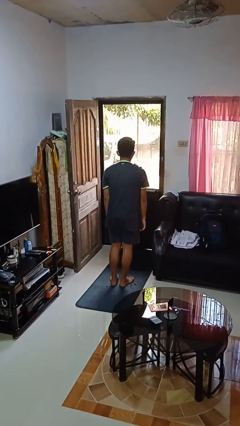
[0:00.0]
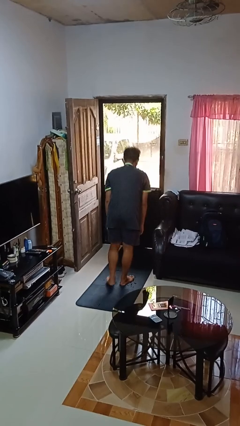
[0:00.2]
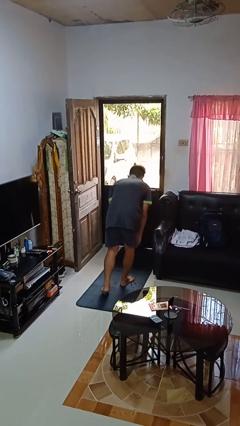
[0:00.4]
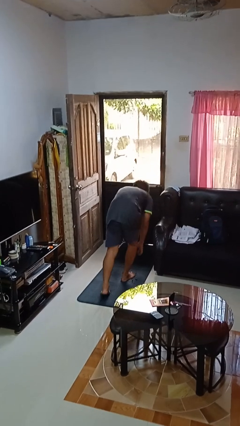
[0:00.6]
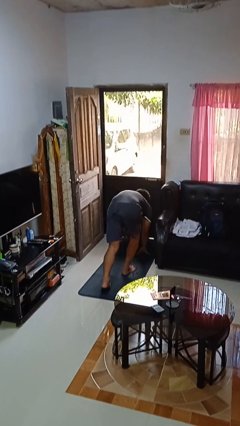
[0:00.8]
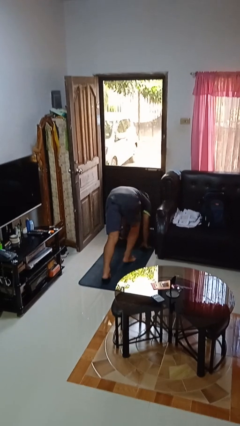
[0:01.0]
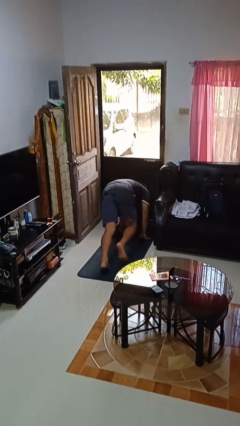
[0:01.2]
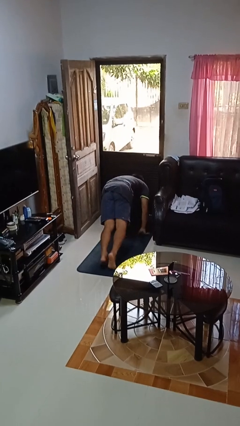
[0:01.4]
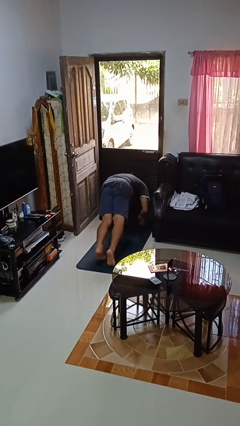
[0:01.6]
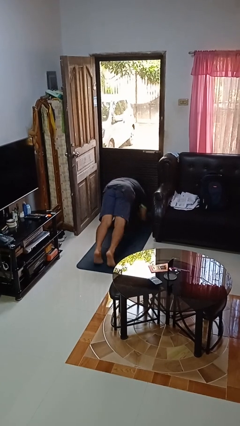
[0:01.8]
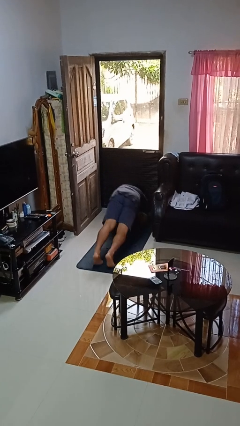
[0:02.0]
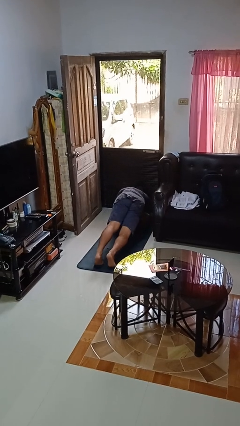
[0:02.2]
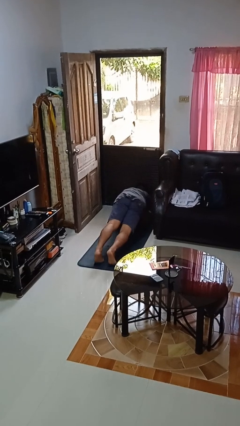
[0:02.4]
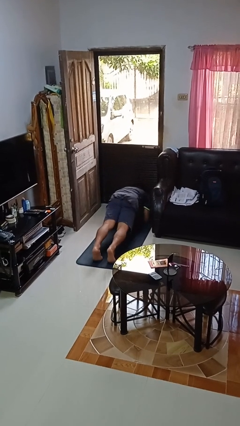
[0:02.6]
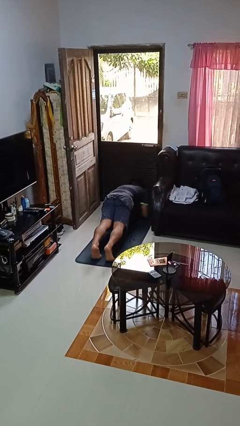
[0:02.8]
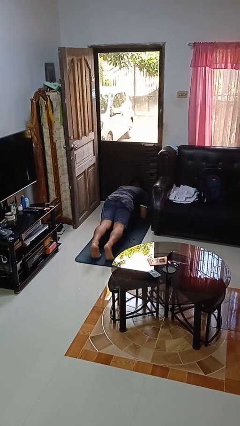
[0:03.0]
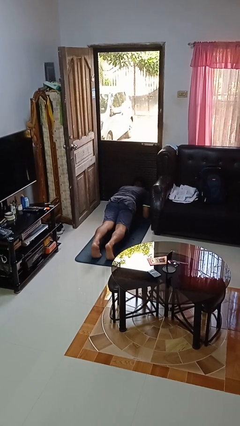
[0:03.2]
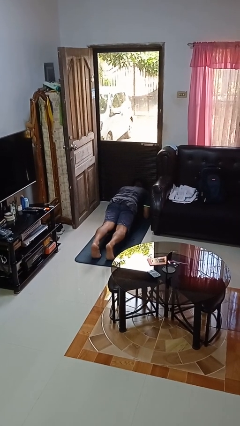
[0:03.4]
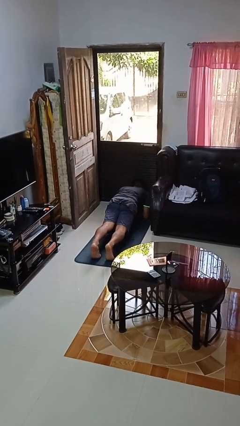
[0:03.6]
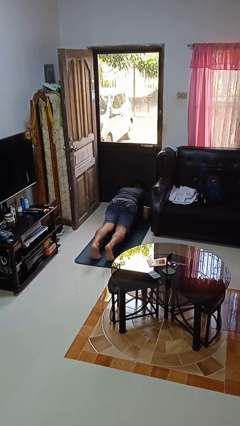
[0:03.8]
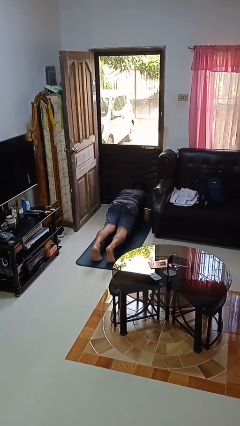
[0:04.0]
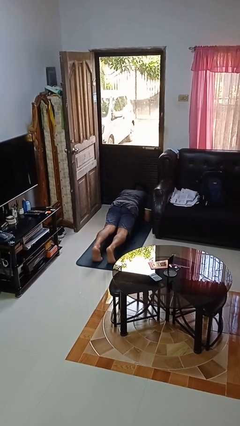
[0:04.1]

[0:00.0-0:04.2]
person exercises with plank

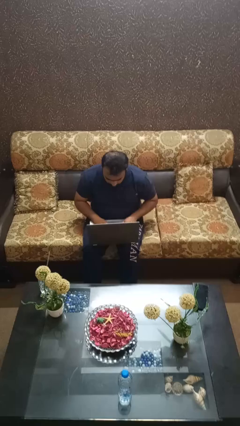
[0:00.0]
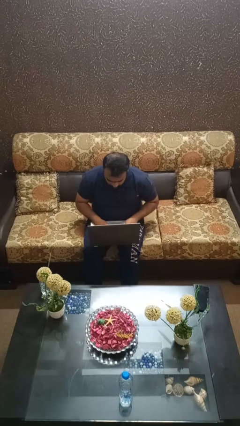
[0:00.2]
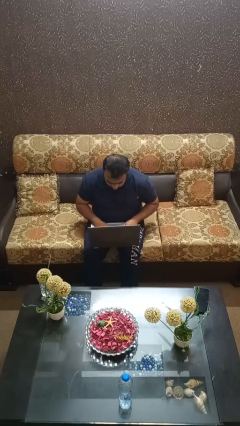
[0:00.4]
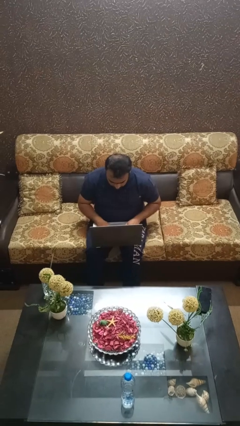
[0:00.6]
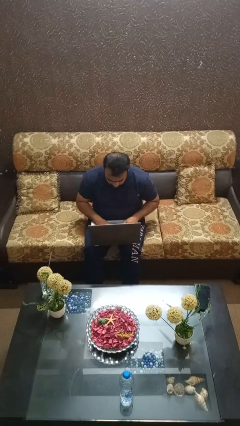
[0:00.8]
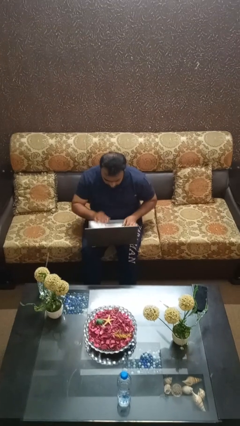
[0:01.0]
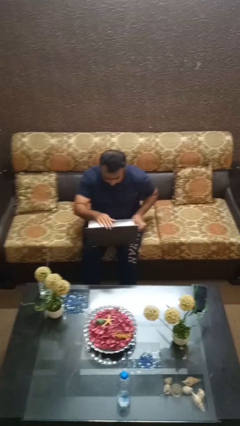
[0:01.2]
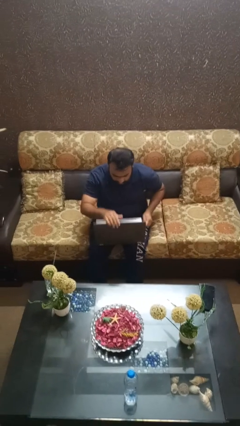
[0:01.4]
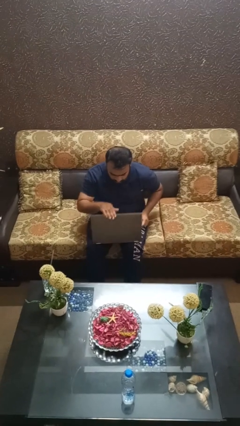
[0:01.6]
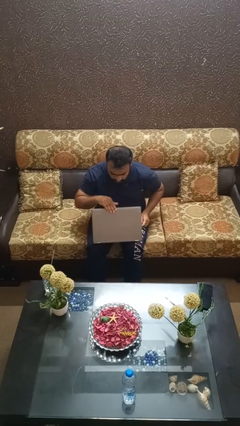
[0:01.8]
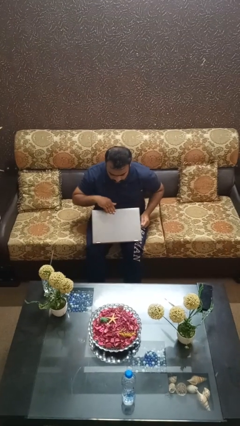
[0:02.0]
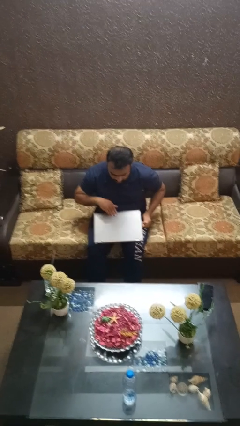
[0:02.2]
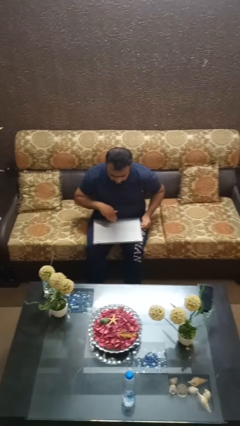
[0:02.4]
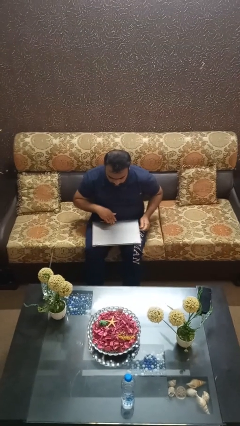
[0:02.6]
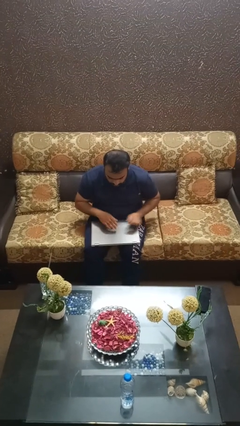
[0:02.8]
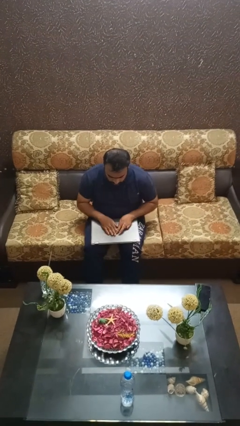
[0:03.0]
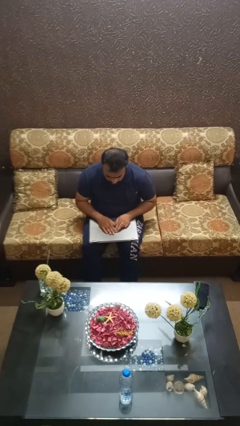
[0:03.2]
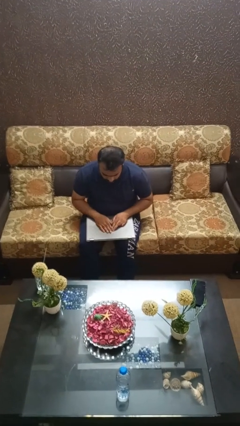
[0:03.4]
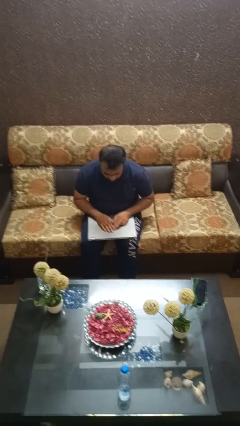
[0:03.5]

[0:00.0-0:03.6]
person closes laptop

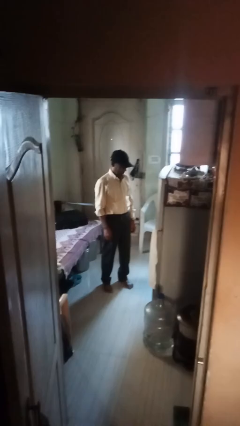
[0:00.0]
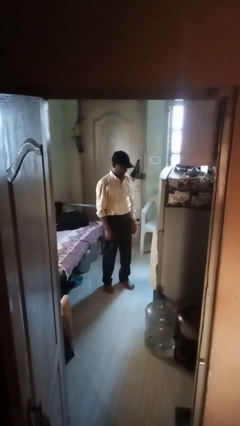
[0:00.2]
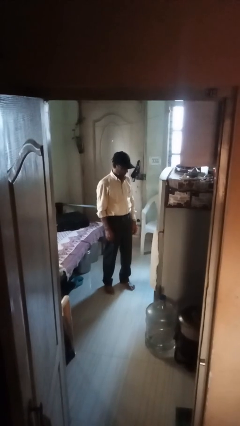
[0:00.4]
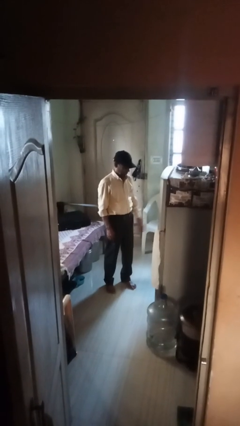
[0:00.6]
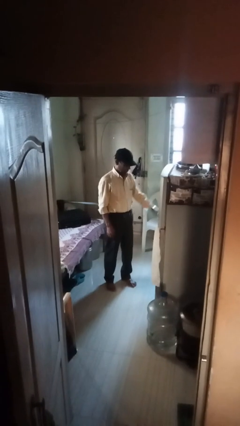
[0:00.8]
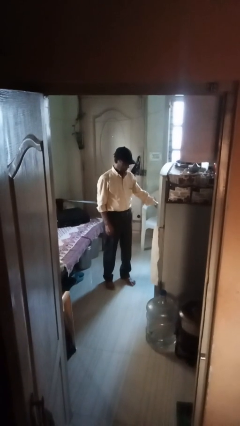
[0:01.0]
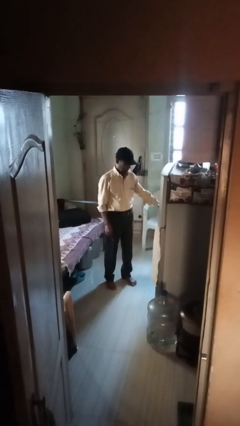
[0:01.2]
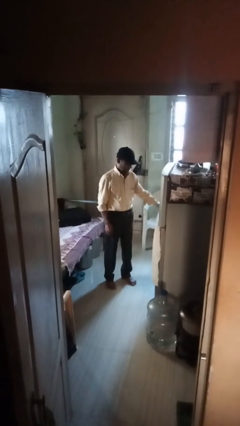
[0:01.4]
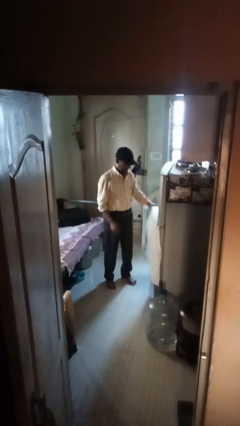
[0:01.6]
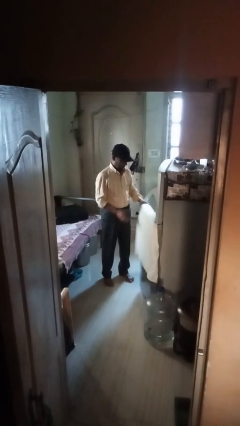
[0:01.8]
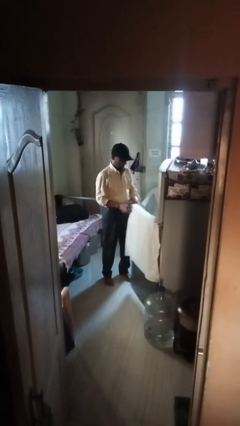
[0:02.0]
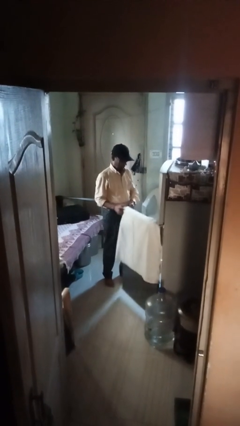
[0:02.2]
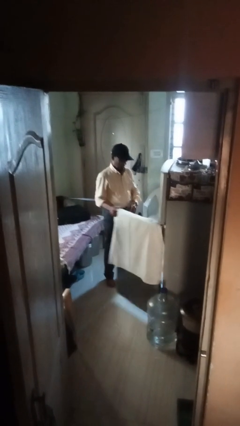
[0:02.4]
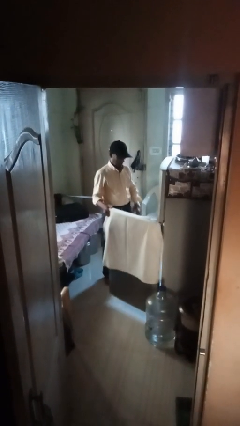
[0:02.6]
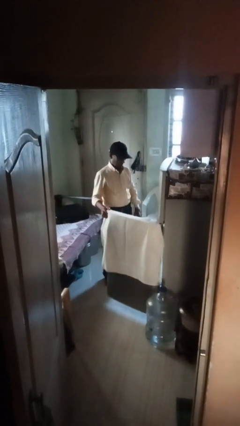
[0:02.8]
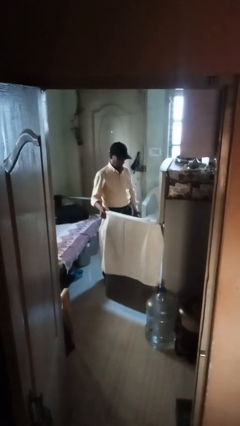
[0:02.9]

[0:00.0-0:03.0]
person opens clothes washer

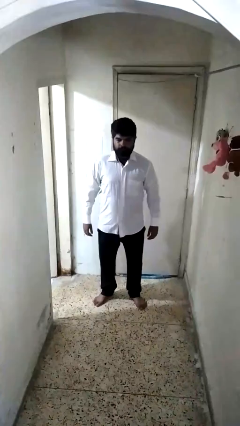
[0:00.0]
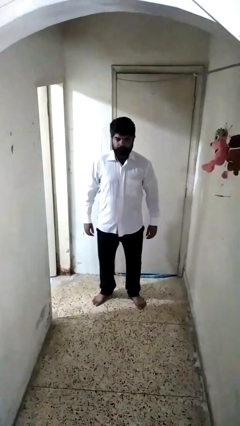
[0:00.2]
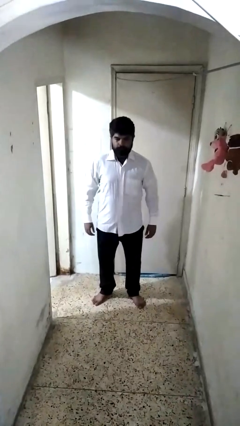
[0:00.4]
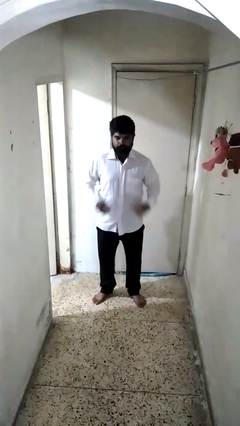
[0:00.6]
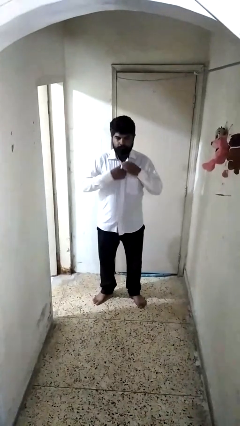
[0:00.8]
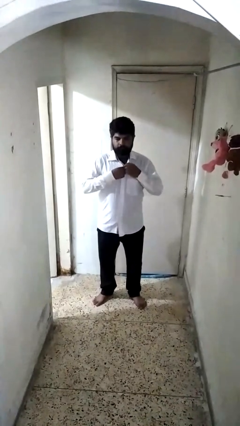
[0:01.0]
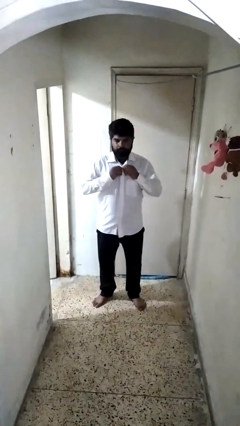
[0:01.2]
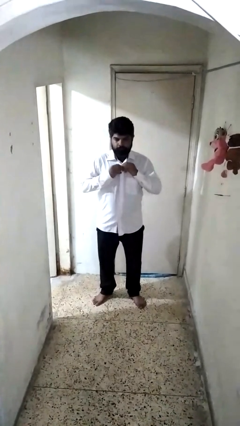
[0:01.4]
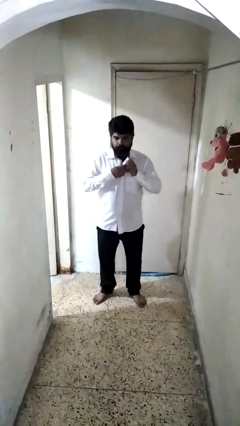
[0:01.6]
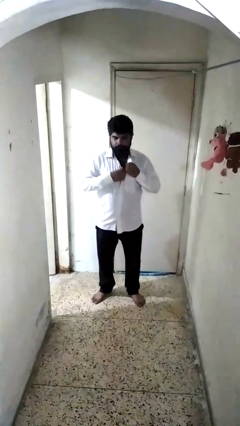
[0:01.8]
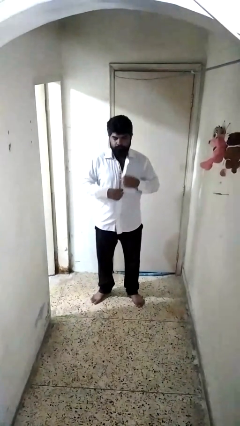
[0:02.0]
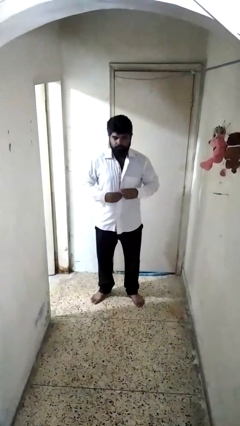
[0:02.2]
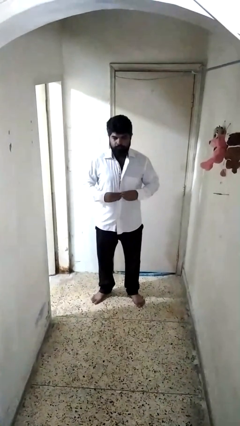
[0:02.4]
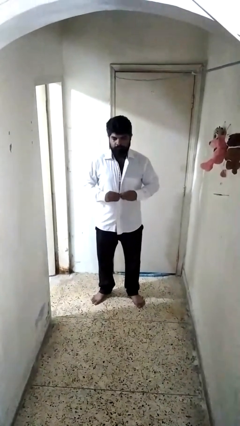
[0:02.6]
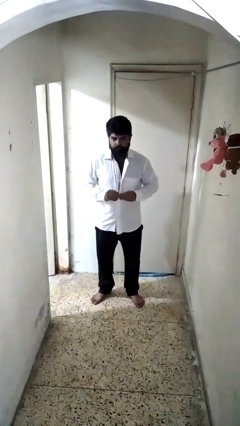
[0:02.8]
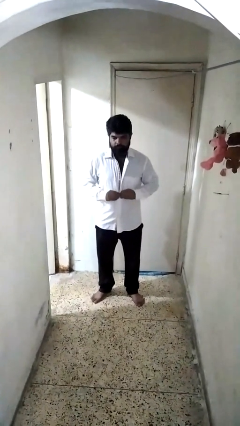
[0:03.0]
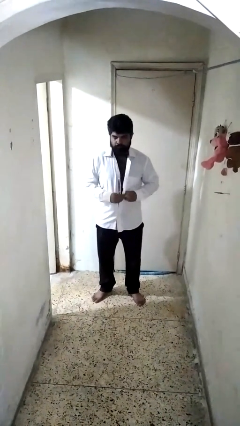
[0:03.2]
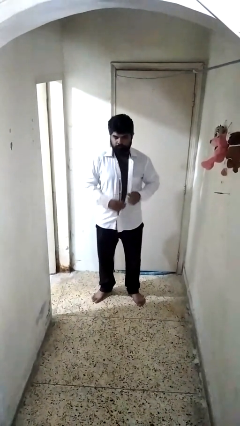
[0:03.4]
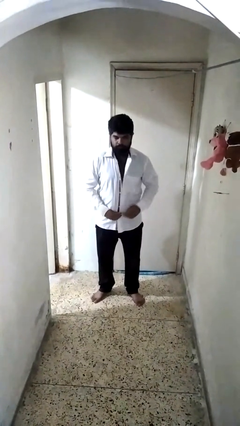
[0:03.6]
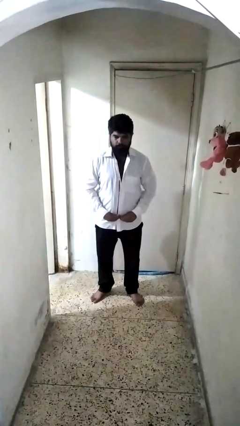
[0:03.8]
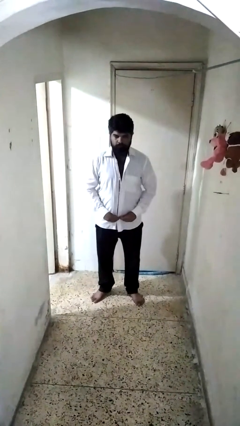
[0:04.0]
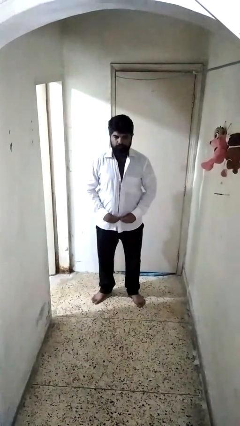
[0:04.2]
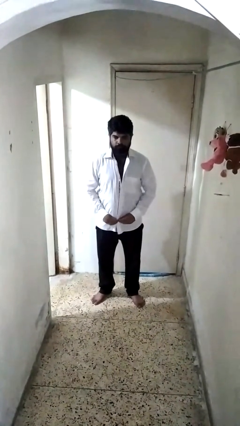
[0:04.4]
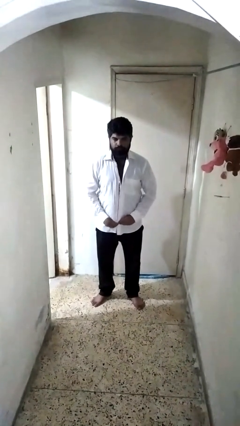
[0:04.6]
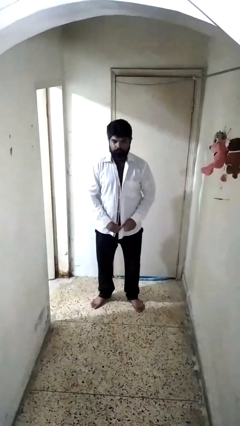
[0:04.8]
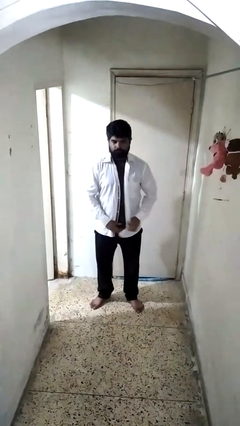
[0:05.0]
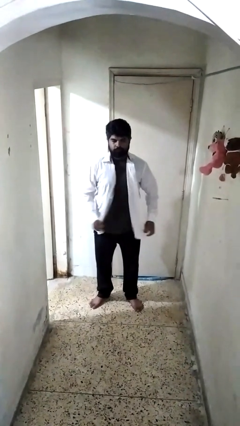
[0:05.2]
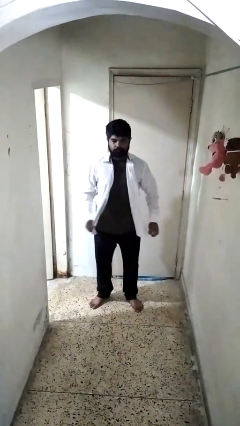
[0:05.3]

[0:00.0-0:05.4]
person unbuttons shirt

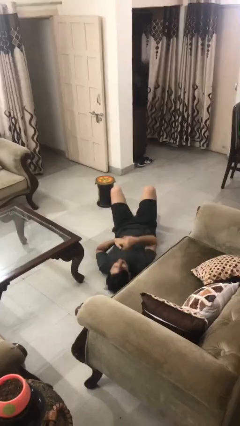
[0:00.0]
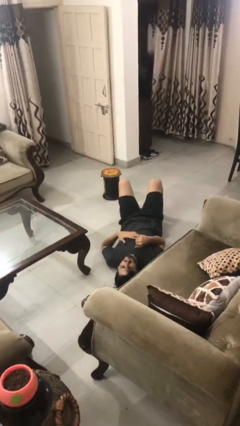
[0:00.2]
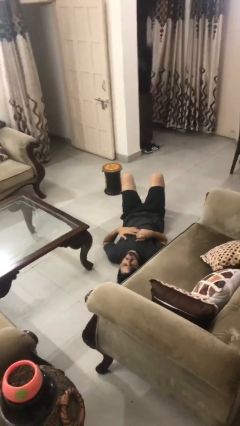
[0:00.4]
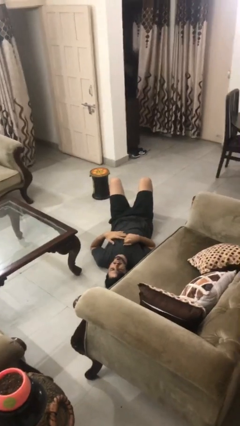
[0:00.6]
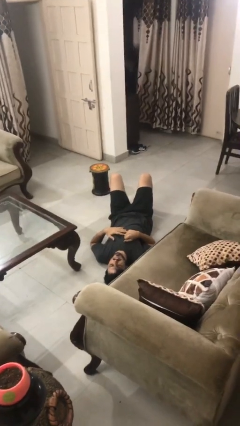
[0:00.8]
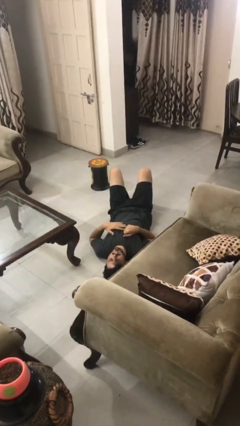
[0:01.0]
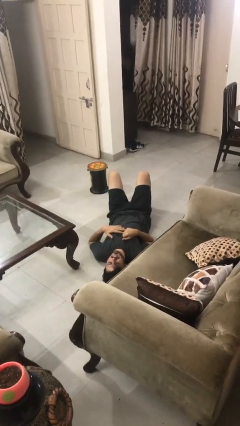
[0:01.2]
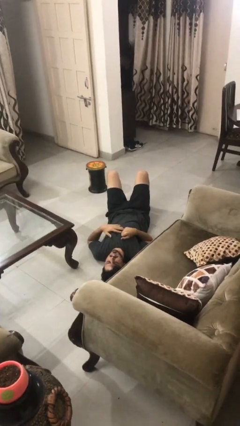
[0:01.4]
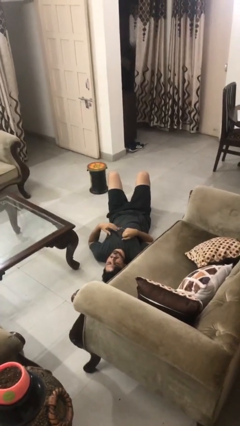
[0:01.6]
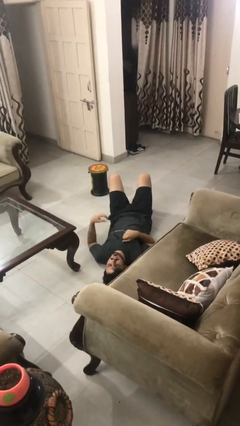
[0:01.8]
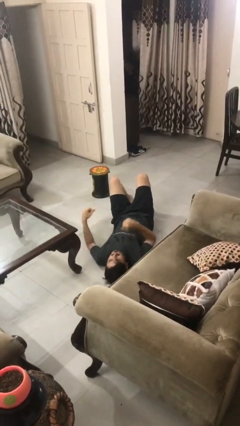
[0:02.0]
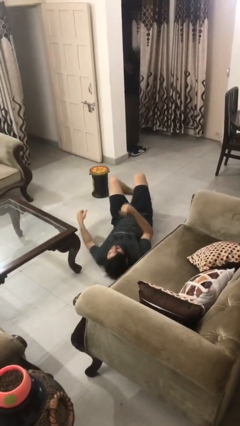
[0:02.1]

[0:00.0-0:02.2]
person lies down on floor
